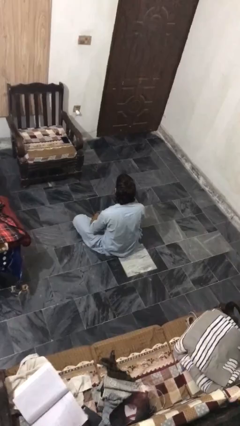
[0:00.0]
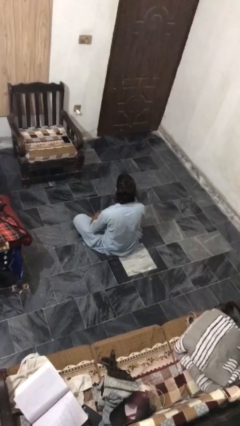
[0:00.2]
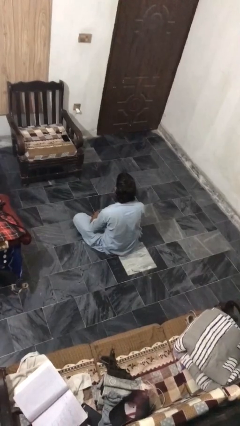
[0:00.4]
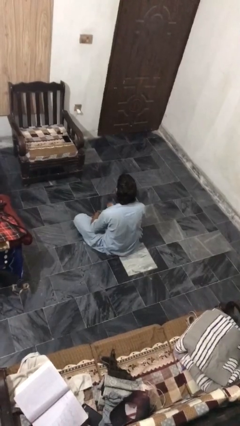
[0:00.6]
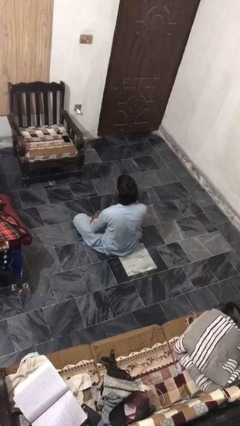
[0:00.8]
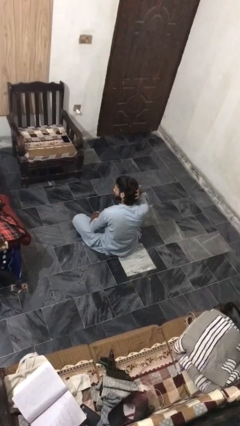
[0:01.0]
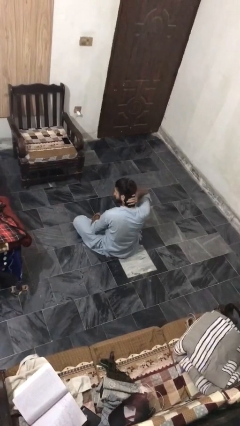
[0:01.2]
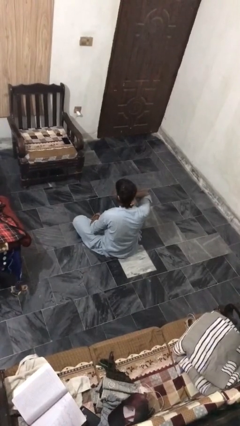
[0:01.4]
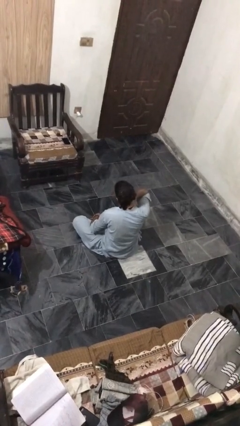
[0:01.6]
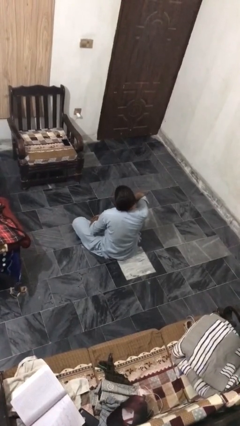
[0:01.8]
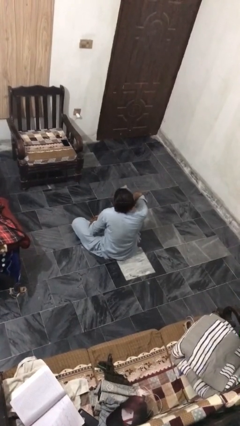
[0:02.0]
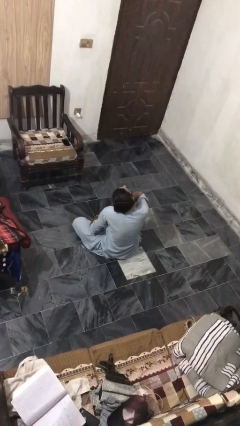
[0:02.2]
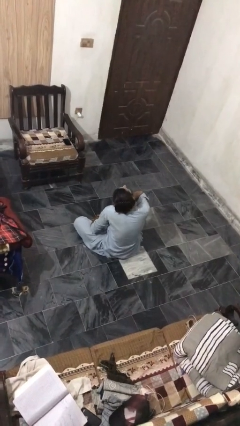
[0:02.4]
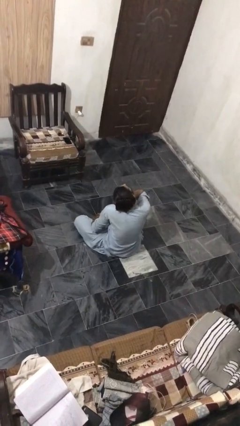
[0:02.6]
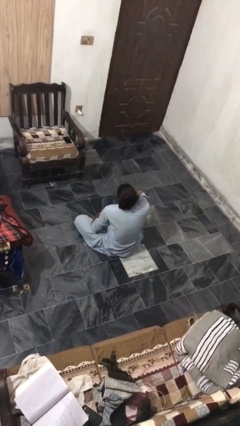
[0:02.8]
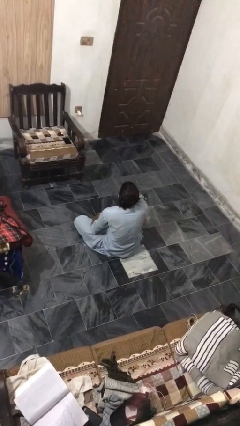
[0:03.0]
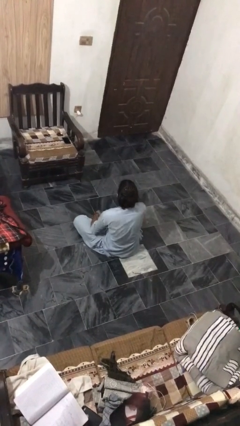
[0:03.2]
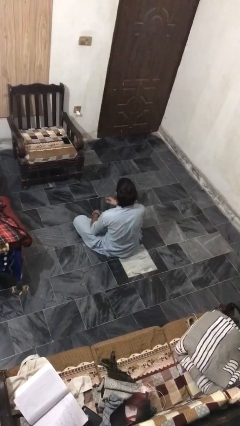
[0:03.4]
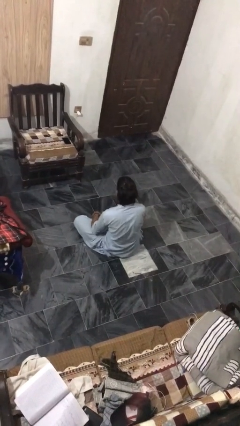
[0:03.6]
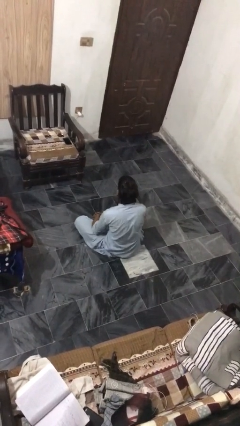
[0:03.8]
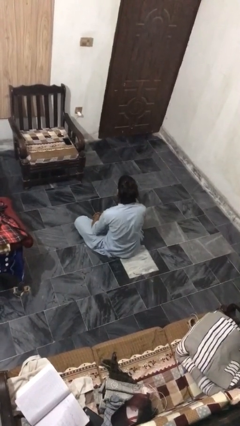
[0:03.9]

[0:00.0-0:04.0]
person rubs neck

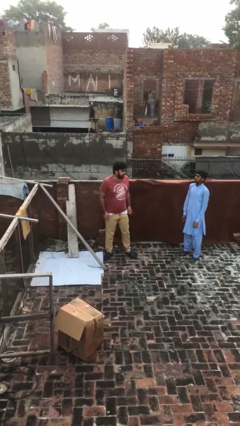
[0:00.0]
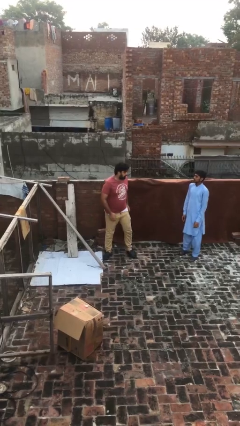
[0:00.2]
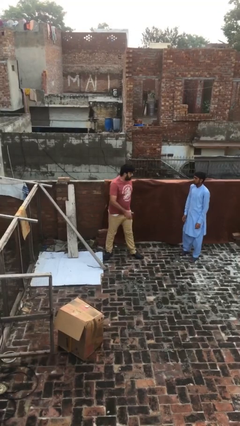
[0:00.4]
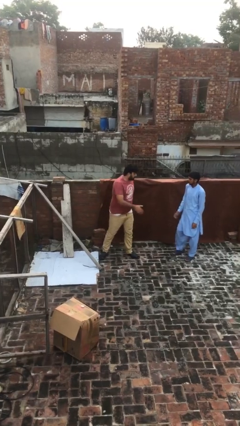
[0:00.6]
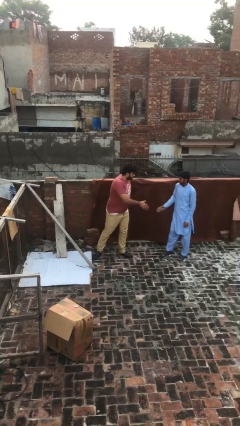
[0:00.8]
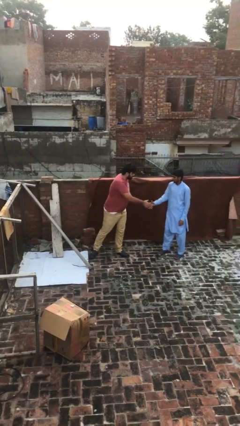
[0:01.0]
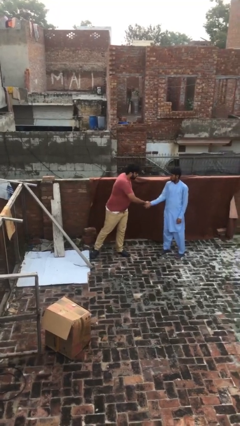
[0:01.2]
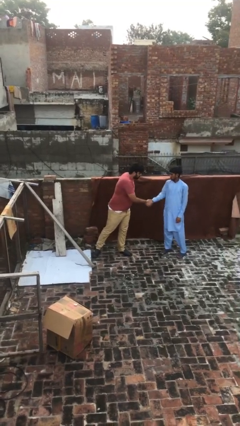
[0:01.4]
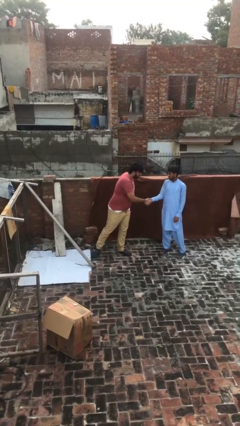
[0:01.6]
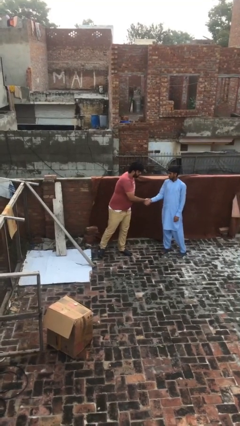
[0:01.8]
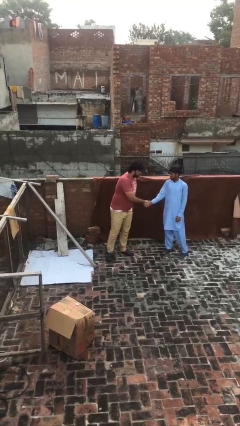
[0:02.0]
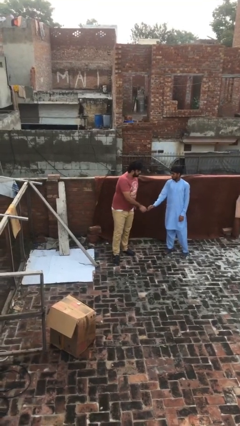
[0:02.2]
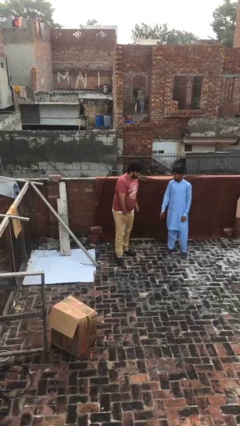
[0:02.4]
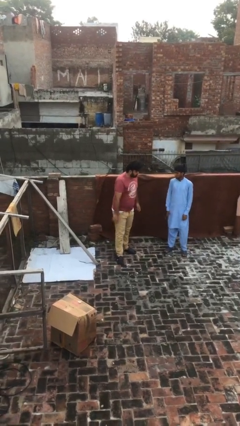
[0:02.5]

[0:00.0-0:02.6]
person shakes hand

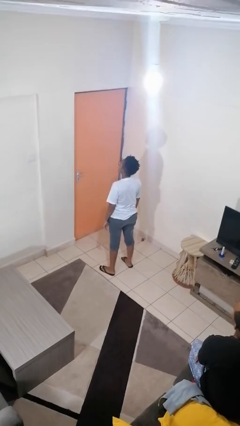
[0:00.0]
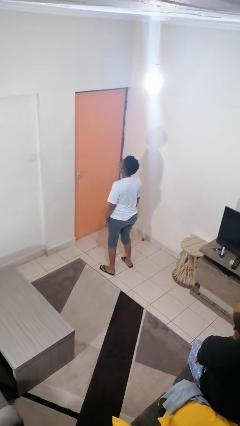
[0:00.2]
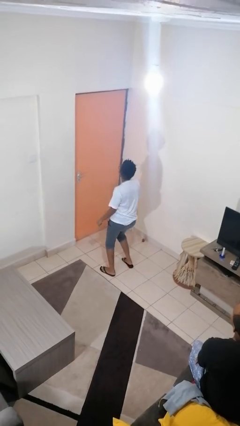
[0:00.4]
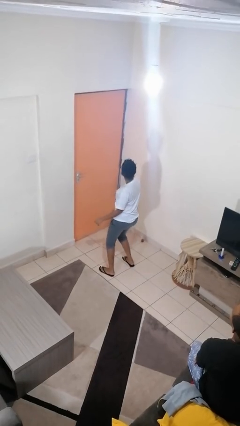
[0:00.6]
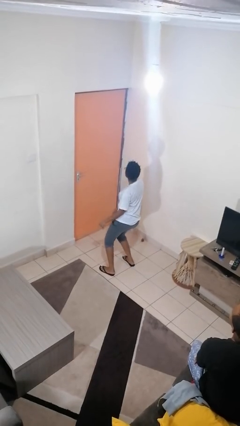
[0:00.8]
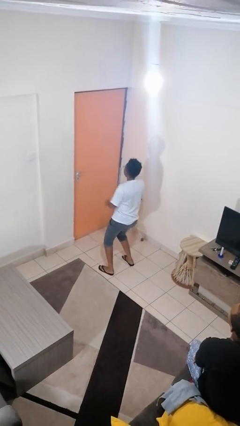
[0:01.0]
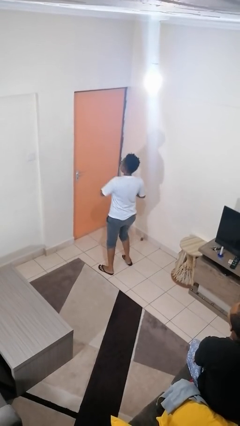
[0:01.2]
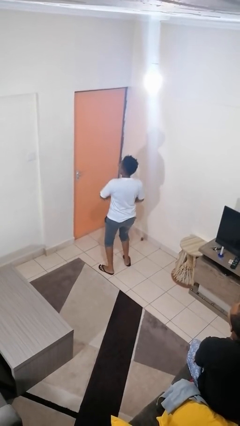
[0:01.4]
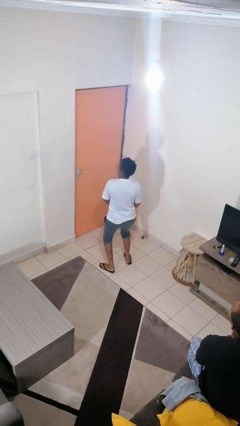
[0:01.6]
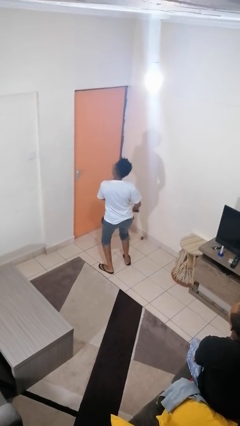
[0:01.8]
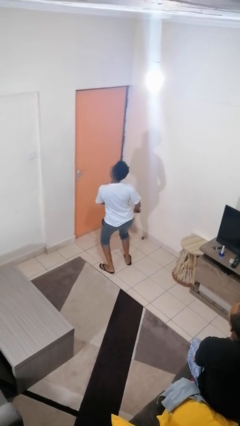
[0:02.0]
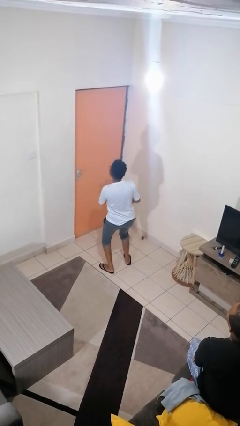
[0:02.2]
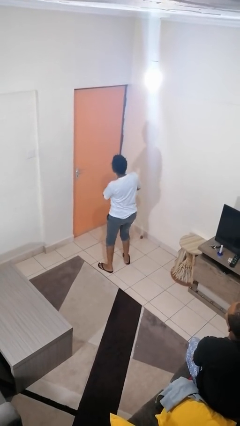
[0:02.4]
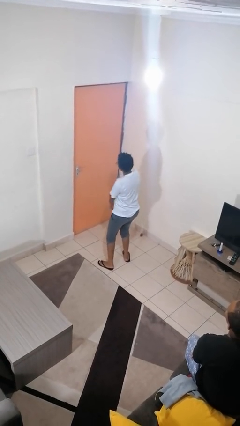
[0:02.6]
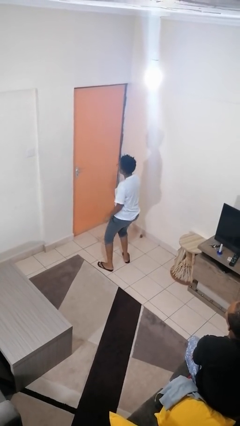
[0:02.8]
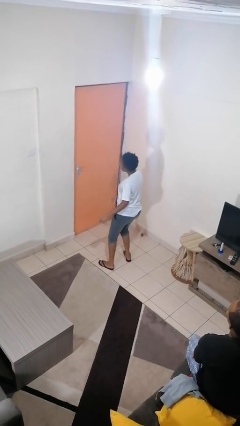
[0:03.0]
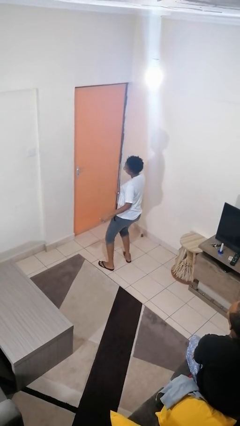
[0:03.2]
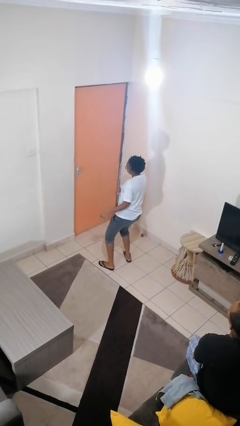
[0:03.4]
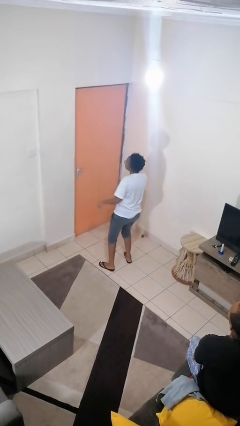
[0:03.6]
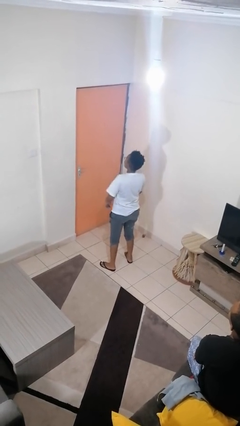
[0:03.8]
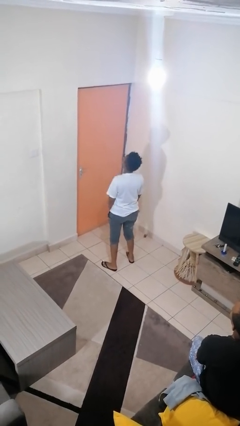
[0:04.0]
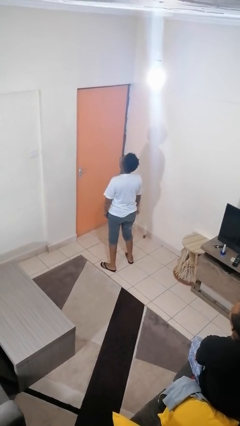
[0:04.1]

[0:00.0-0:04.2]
person dances in place

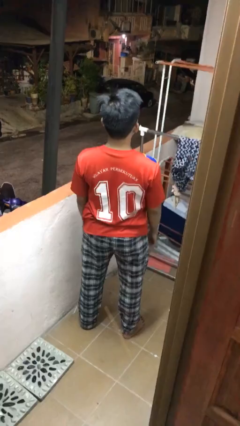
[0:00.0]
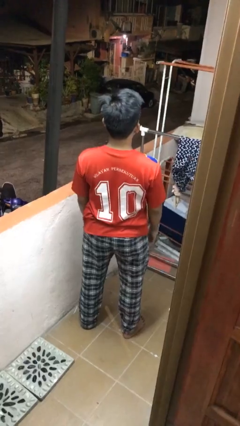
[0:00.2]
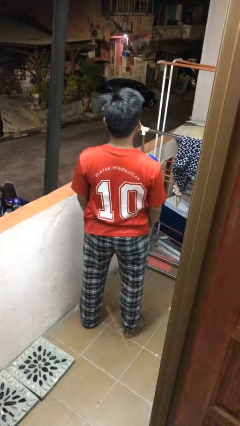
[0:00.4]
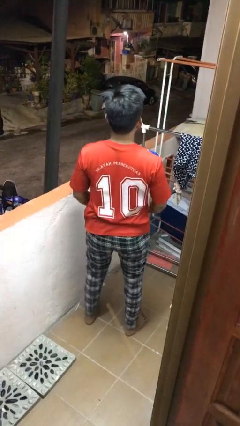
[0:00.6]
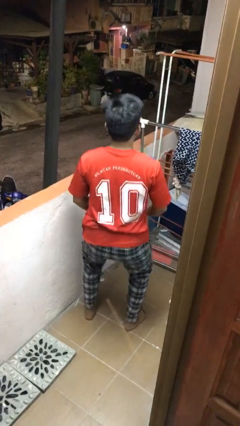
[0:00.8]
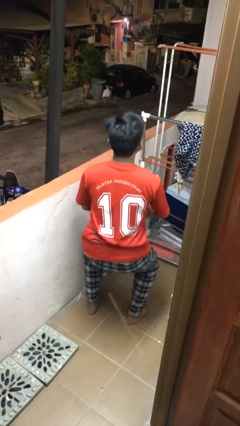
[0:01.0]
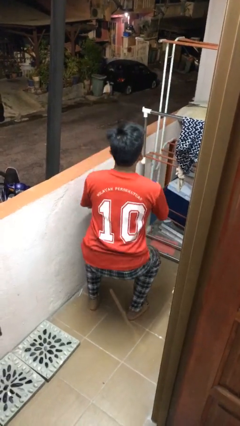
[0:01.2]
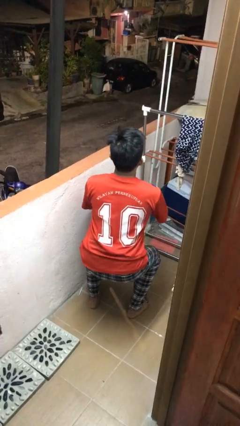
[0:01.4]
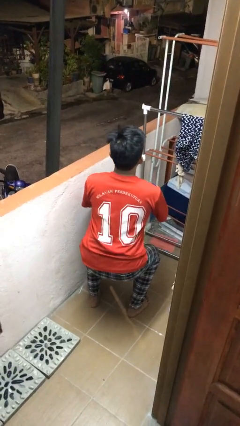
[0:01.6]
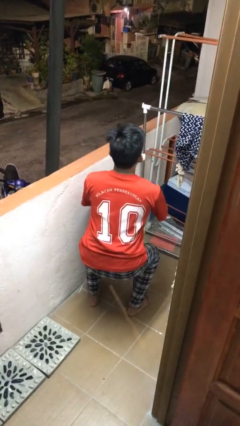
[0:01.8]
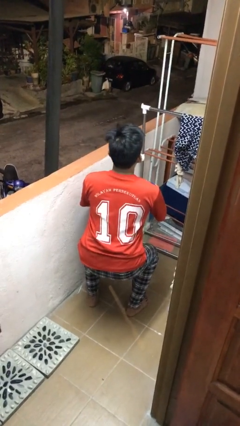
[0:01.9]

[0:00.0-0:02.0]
person squats

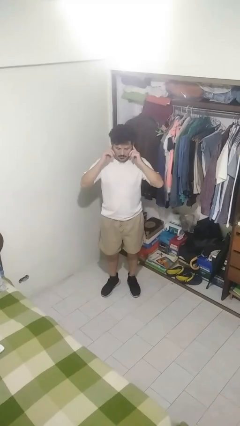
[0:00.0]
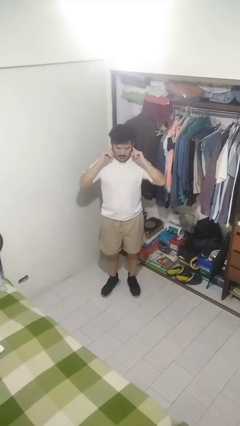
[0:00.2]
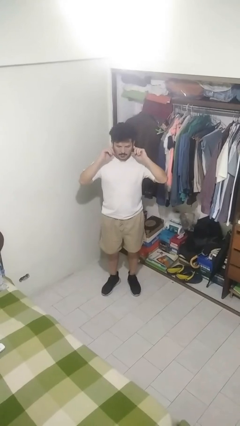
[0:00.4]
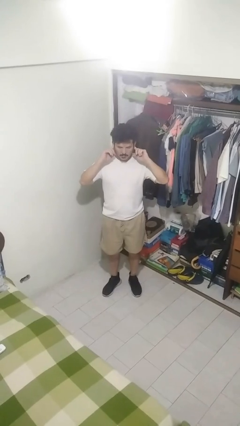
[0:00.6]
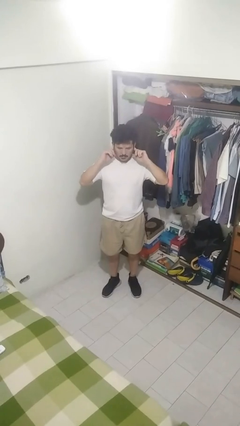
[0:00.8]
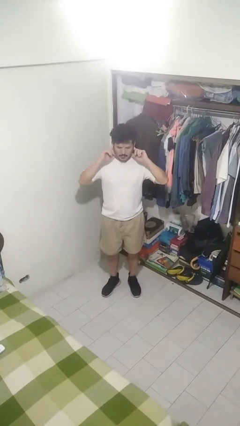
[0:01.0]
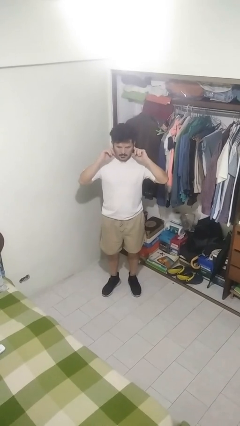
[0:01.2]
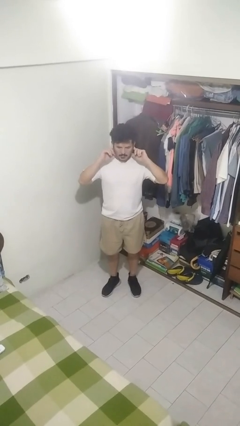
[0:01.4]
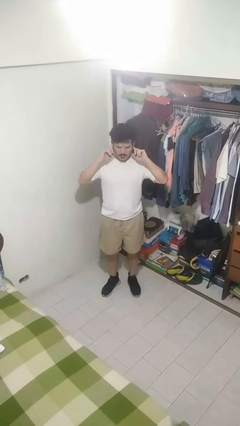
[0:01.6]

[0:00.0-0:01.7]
person puts fingers in ear

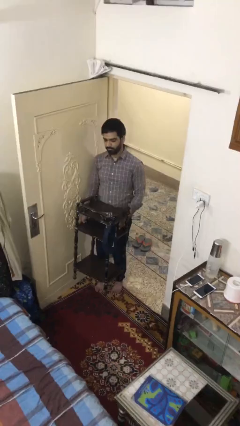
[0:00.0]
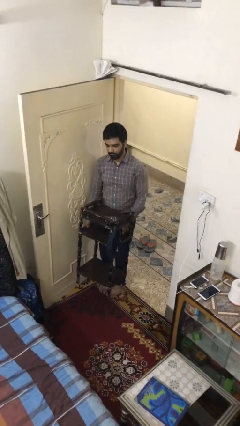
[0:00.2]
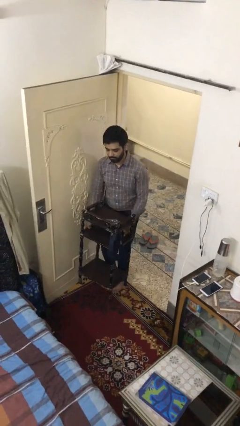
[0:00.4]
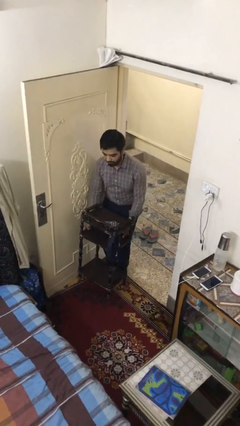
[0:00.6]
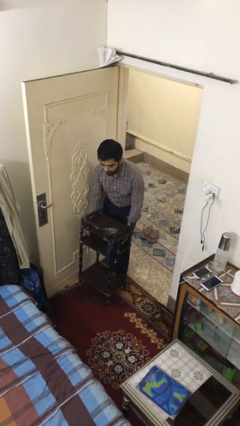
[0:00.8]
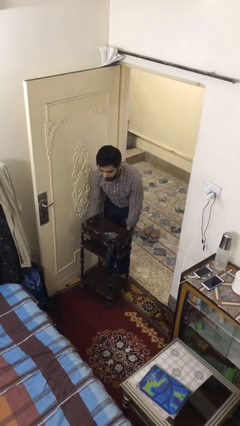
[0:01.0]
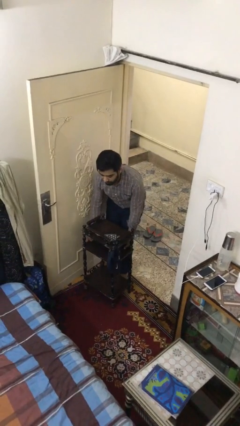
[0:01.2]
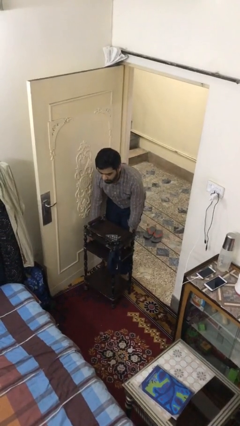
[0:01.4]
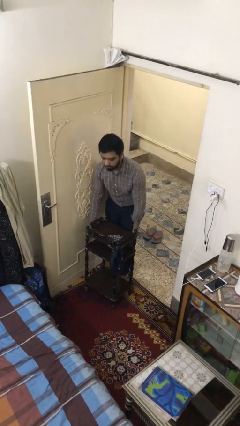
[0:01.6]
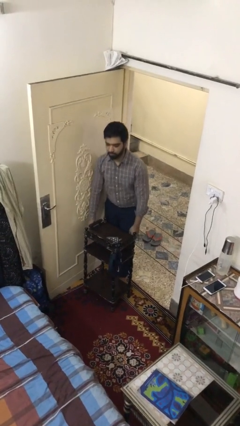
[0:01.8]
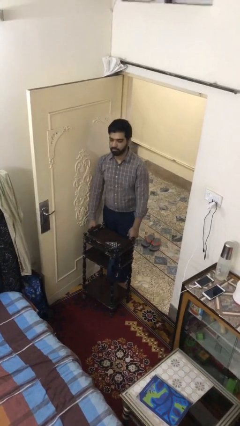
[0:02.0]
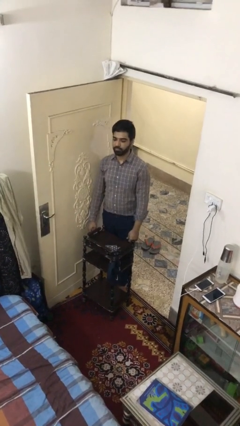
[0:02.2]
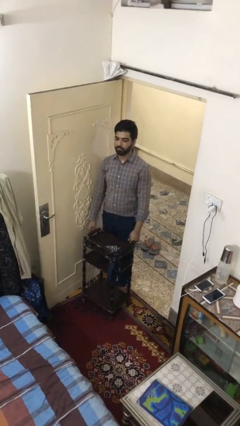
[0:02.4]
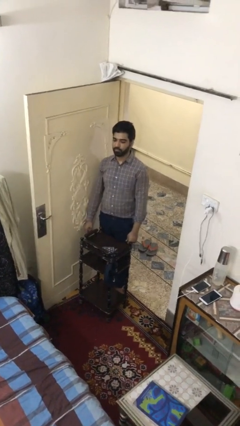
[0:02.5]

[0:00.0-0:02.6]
person puts down object on floor

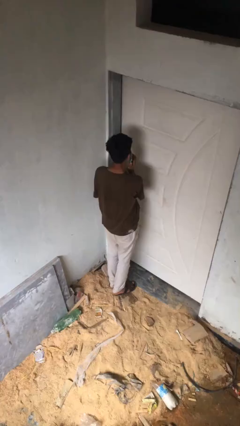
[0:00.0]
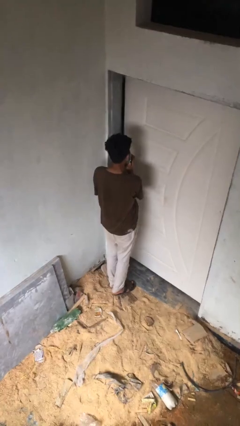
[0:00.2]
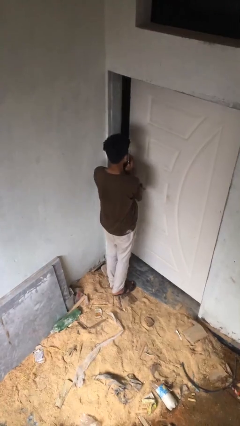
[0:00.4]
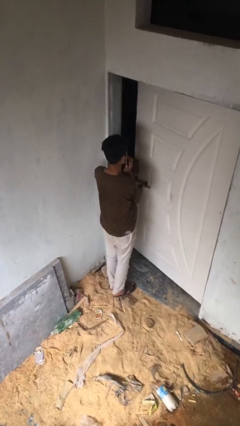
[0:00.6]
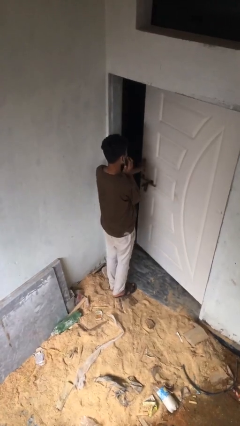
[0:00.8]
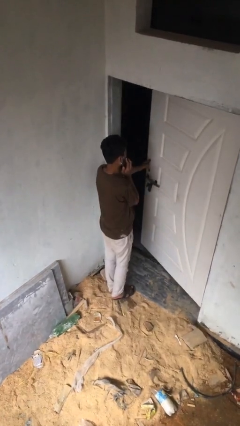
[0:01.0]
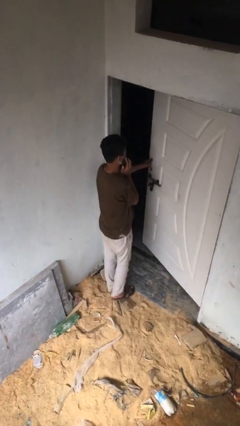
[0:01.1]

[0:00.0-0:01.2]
person opens facility door
